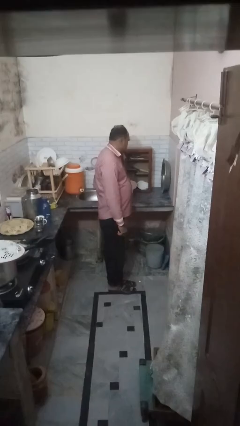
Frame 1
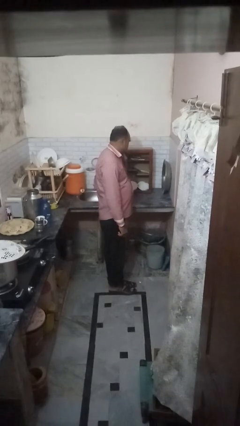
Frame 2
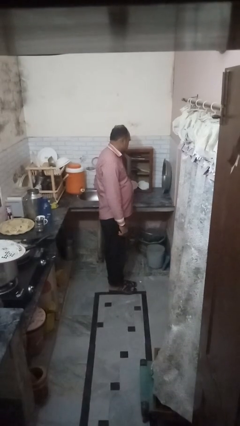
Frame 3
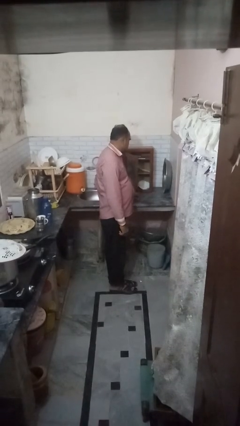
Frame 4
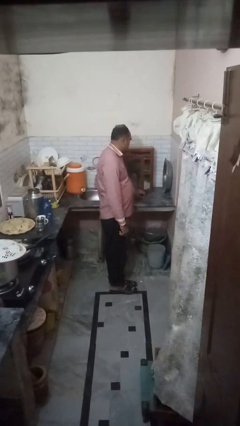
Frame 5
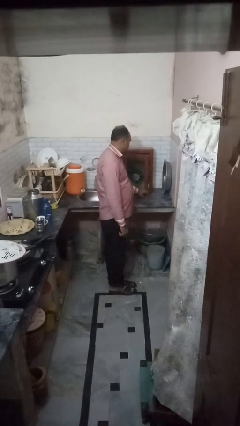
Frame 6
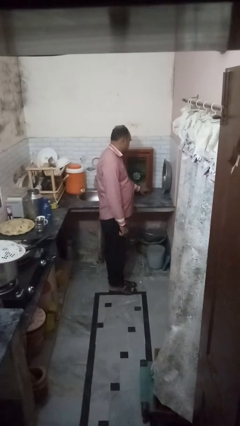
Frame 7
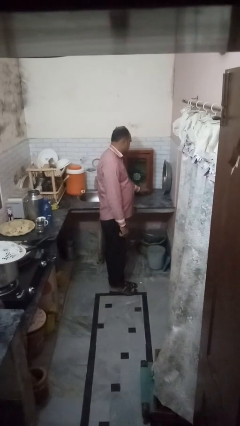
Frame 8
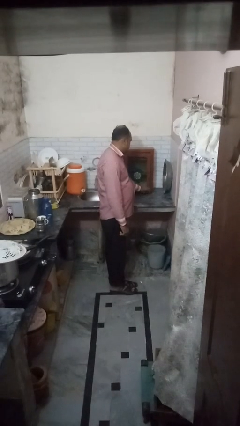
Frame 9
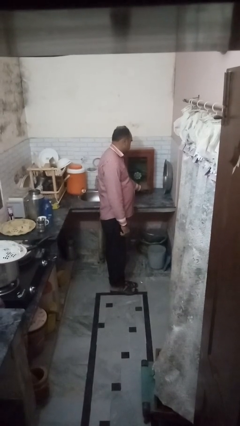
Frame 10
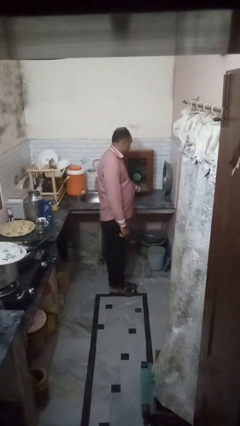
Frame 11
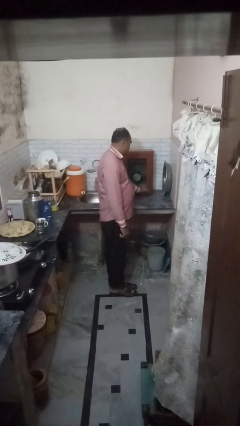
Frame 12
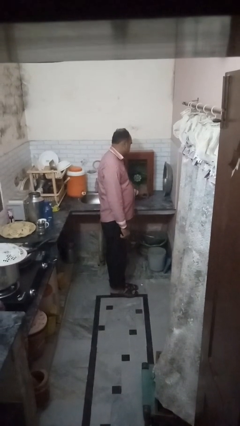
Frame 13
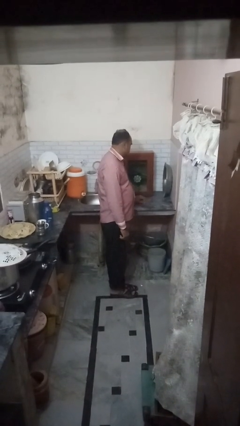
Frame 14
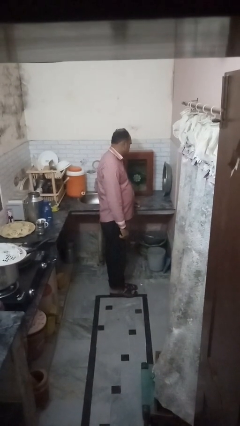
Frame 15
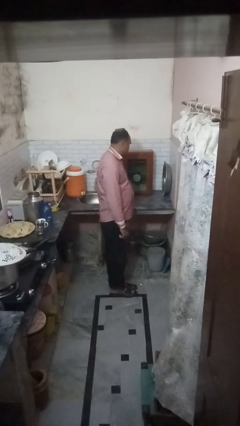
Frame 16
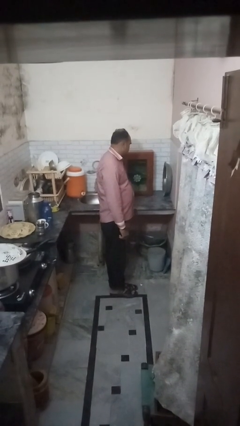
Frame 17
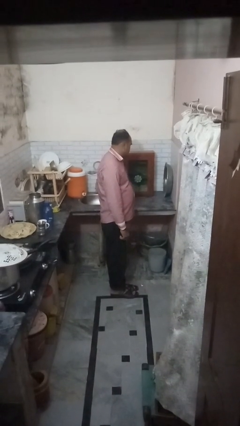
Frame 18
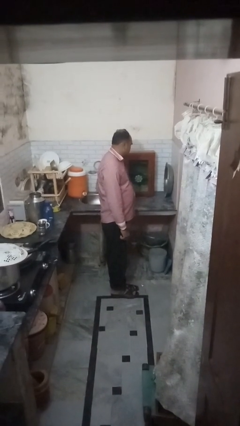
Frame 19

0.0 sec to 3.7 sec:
person closes cabinet

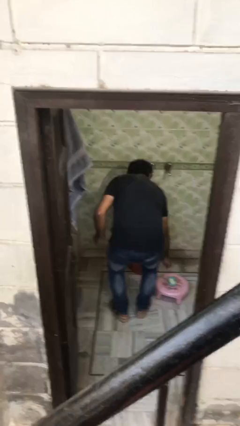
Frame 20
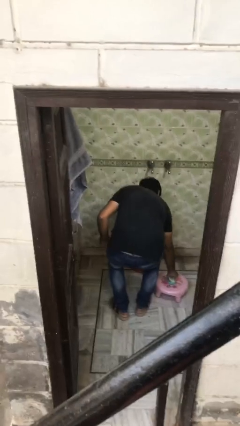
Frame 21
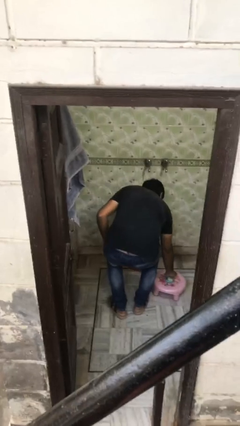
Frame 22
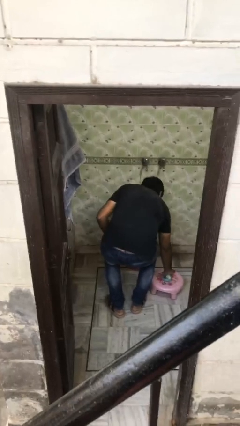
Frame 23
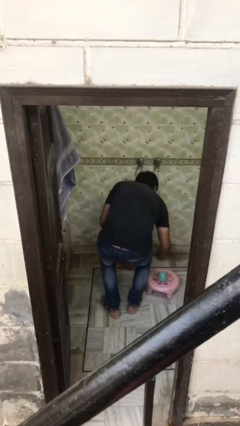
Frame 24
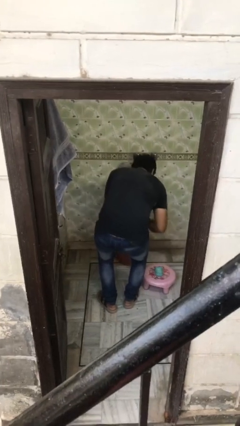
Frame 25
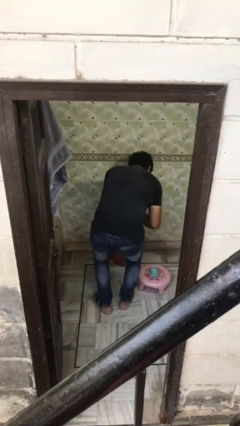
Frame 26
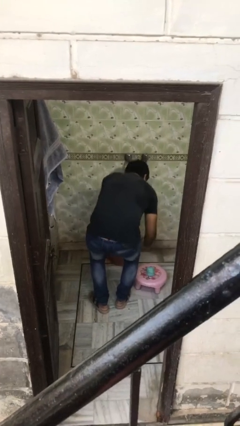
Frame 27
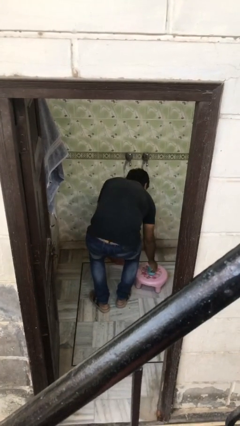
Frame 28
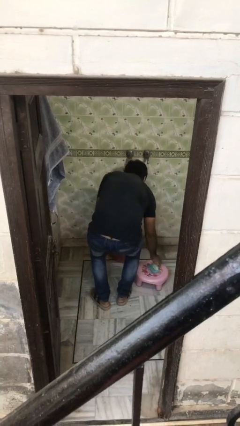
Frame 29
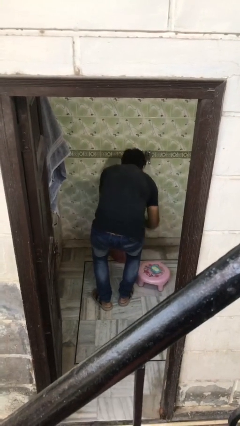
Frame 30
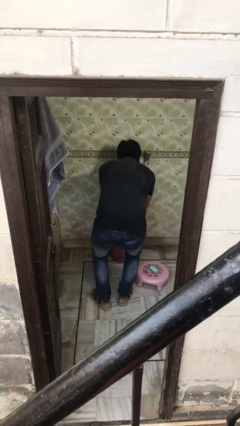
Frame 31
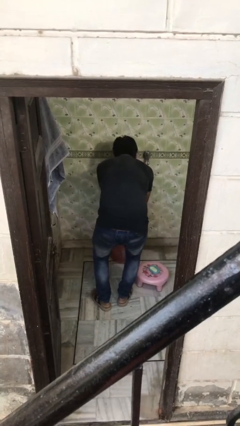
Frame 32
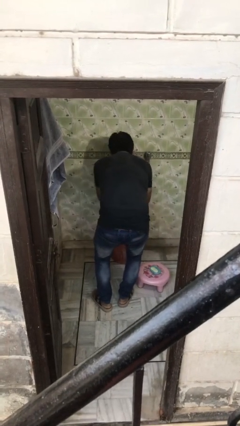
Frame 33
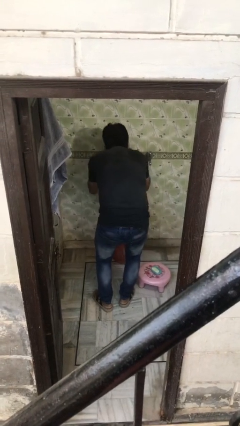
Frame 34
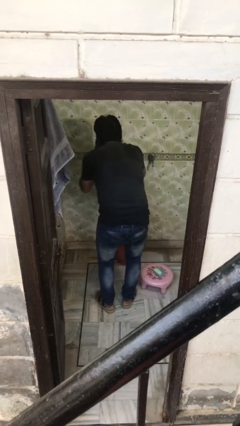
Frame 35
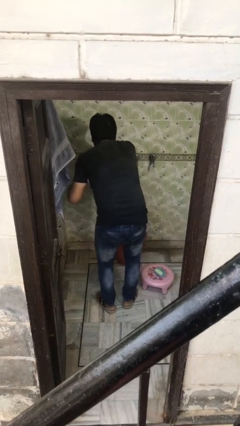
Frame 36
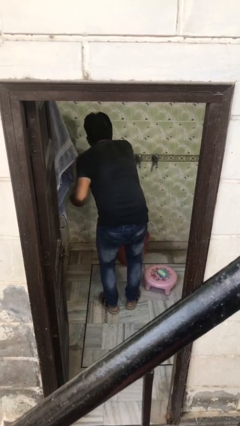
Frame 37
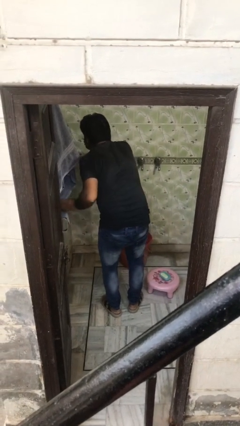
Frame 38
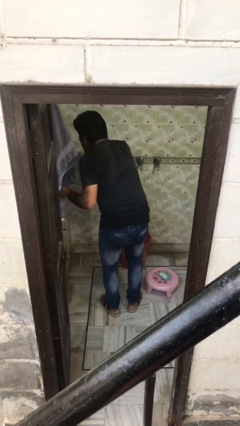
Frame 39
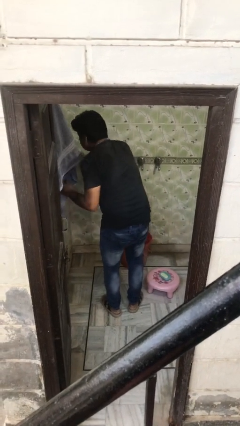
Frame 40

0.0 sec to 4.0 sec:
person washes face

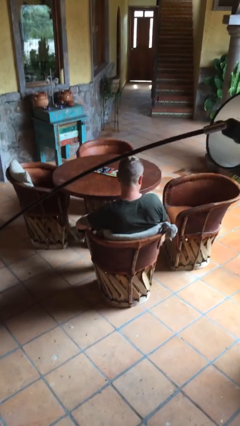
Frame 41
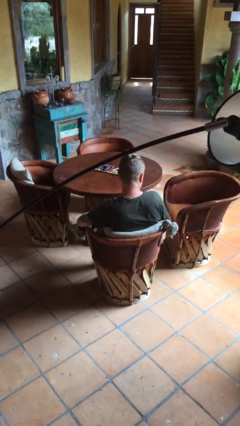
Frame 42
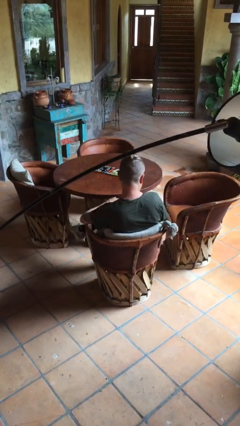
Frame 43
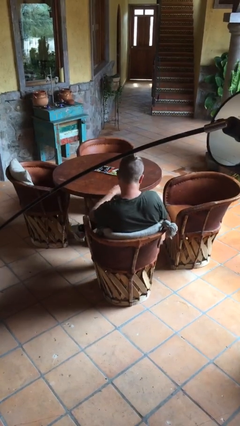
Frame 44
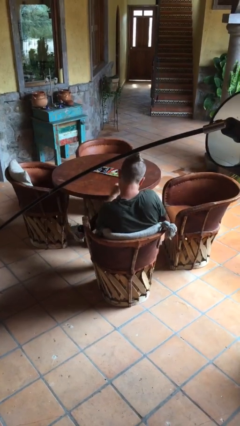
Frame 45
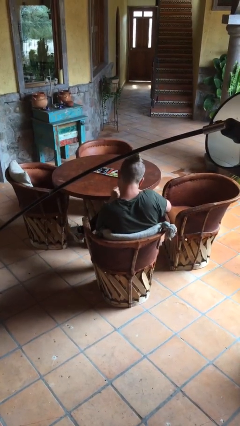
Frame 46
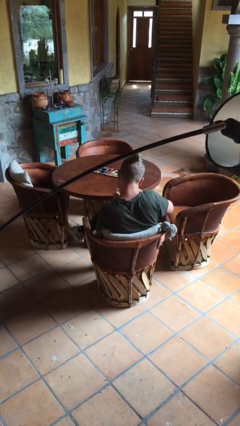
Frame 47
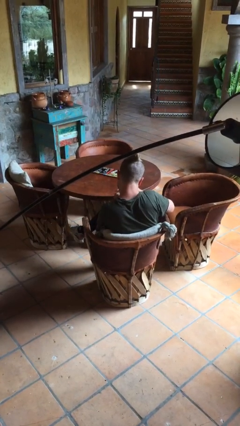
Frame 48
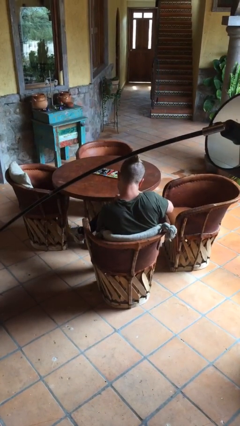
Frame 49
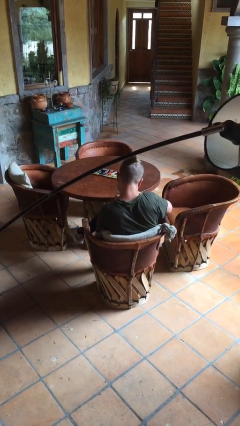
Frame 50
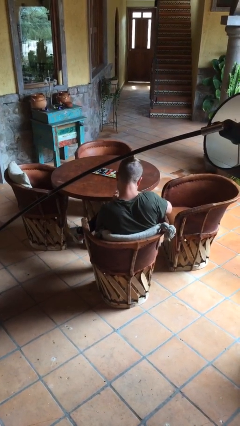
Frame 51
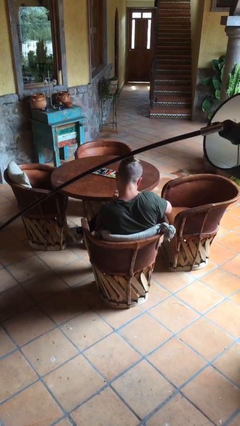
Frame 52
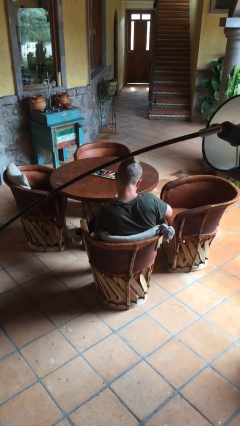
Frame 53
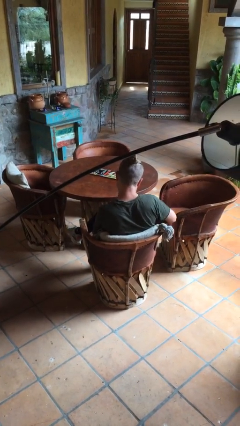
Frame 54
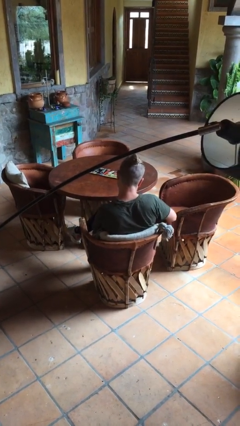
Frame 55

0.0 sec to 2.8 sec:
person files fingernails

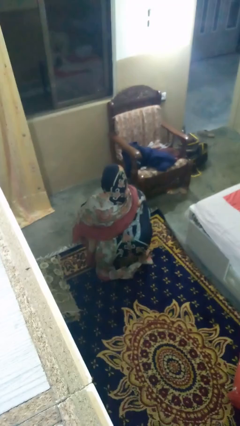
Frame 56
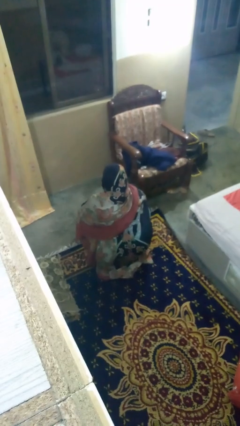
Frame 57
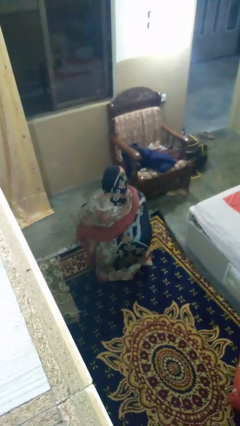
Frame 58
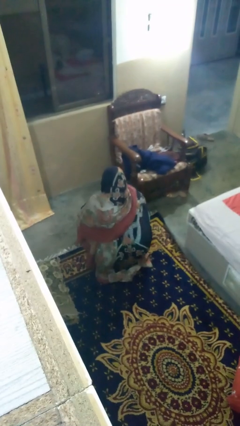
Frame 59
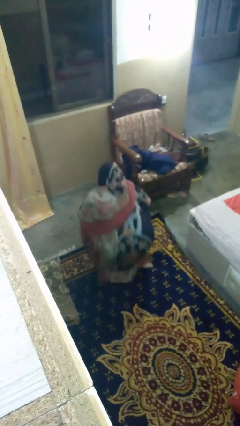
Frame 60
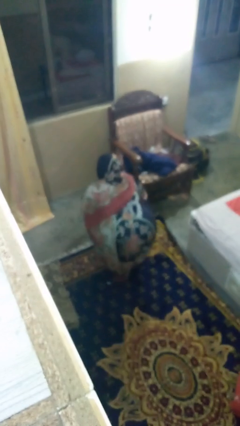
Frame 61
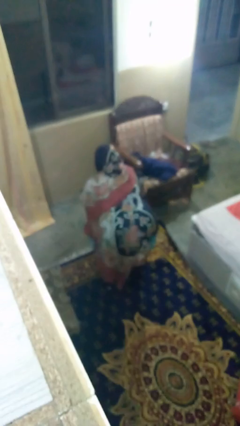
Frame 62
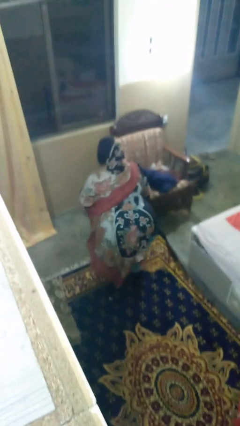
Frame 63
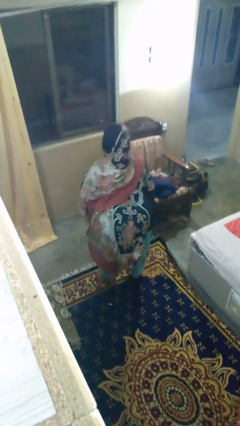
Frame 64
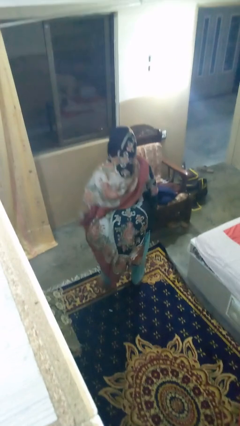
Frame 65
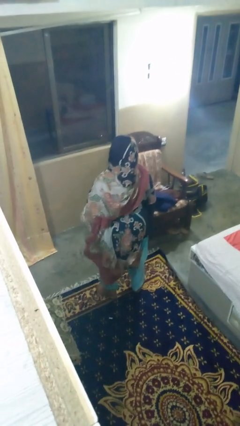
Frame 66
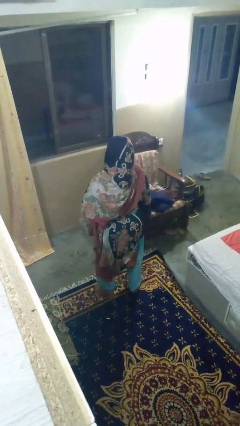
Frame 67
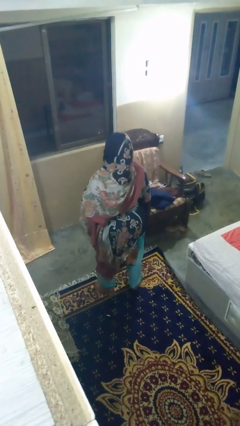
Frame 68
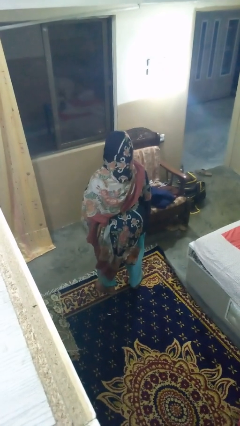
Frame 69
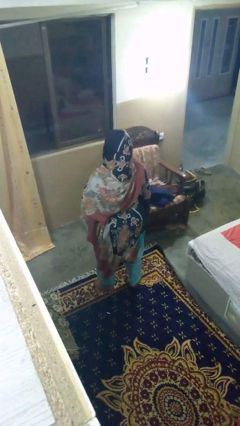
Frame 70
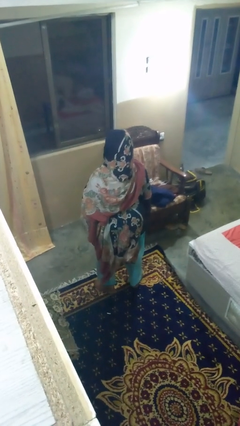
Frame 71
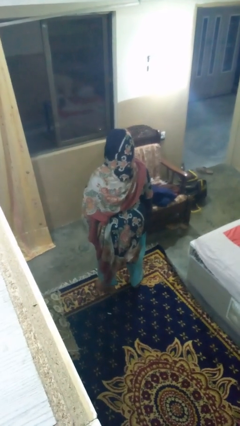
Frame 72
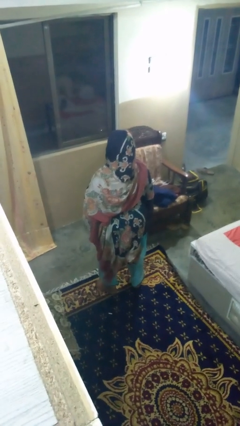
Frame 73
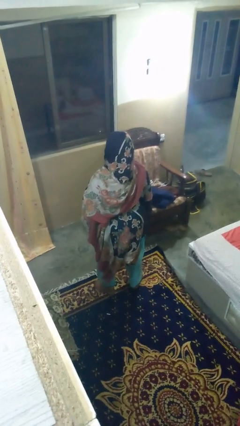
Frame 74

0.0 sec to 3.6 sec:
person stands up

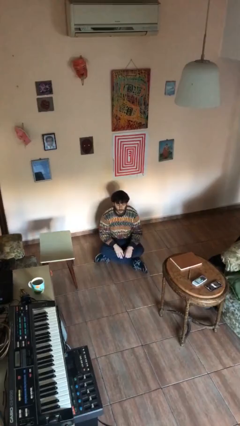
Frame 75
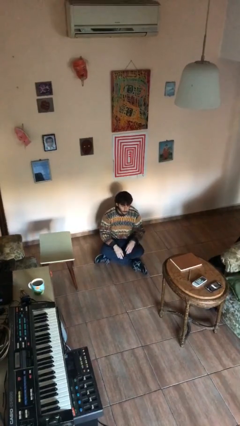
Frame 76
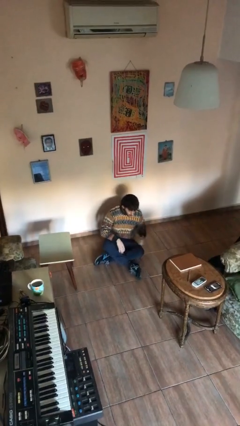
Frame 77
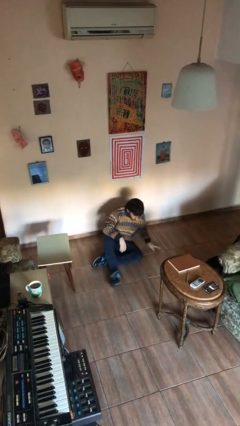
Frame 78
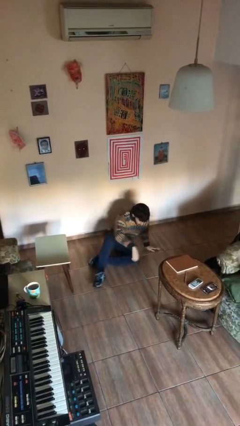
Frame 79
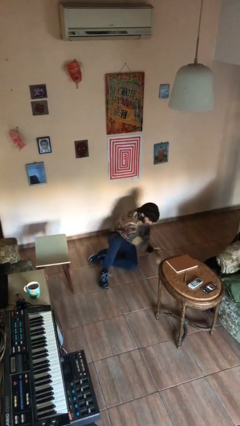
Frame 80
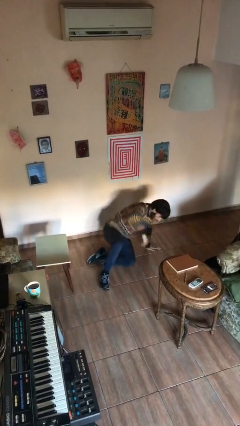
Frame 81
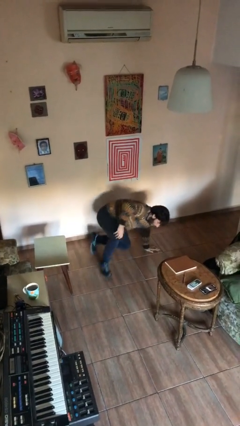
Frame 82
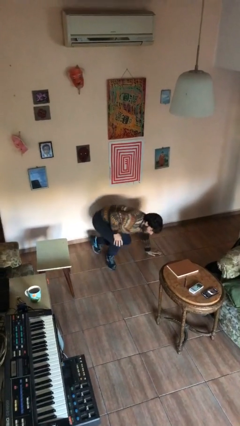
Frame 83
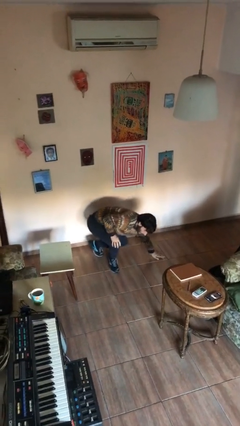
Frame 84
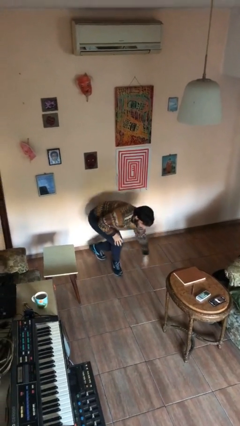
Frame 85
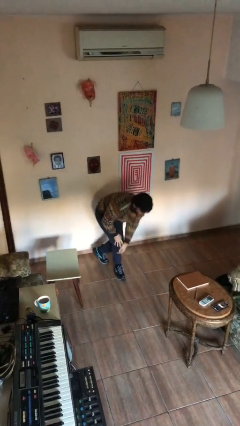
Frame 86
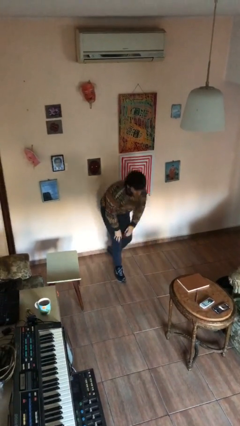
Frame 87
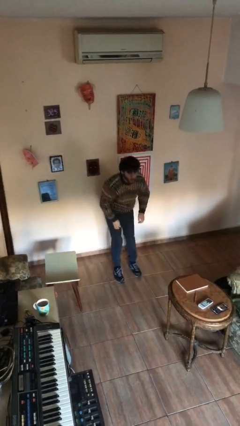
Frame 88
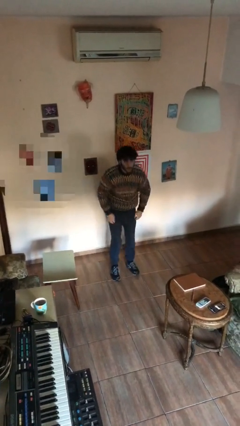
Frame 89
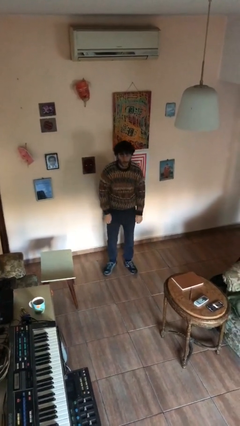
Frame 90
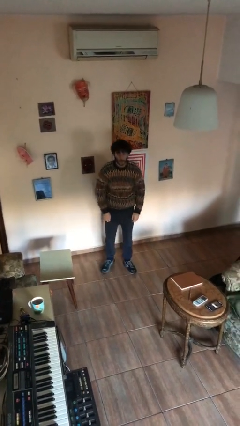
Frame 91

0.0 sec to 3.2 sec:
person stands up from floor

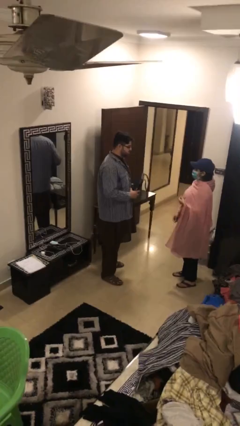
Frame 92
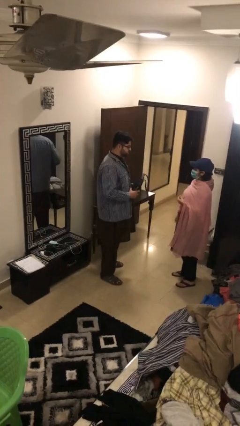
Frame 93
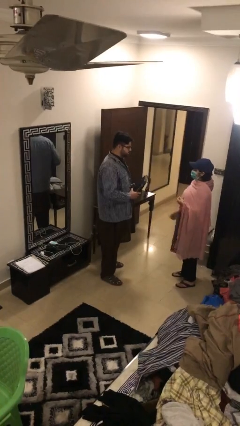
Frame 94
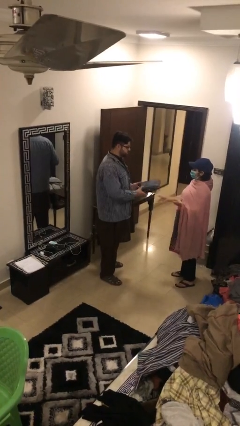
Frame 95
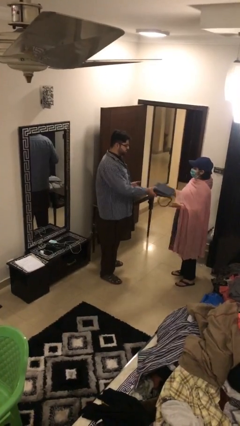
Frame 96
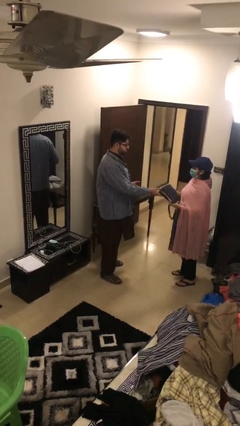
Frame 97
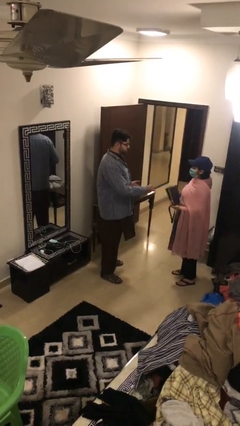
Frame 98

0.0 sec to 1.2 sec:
person transfers object to person
